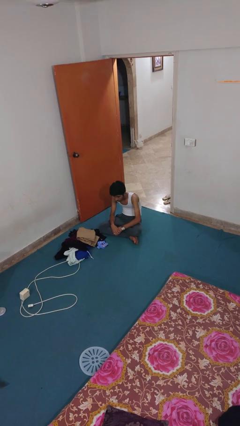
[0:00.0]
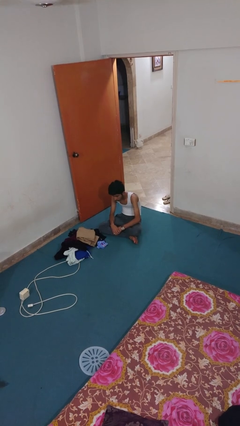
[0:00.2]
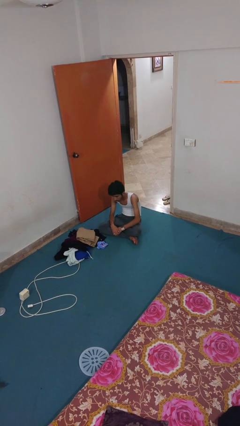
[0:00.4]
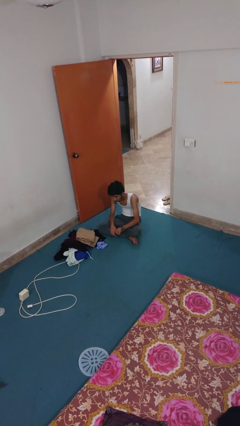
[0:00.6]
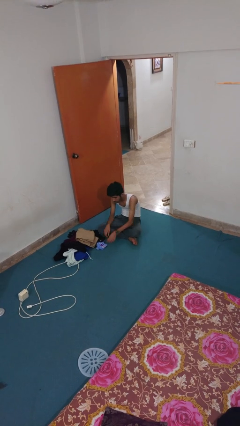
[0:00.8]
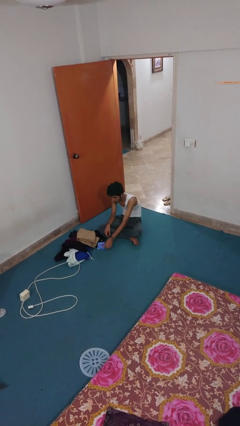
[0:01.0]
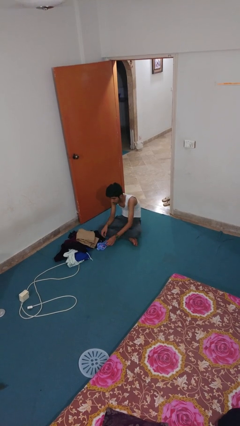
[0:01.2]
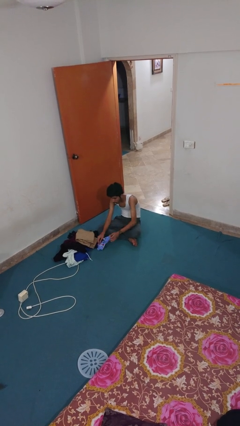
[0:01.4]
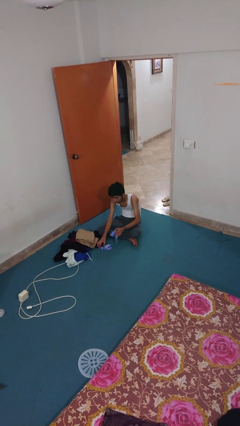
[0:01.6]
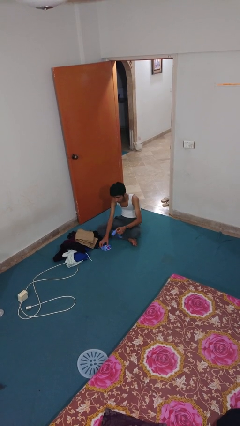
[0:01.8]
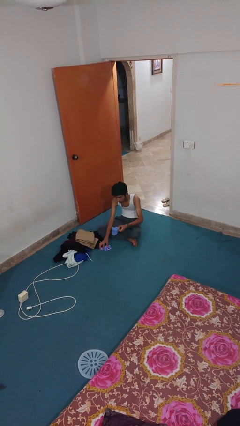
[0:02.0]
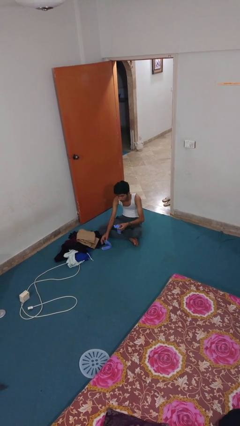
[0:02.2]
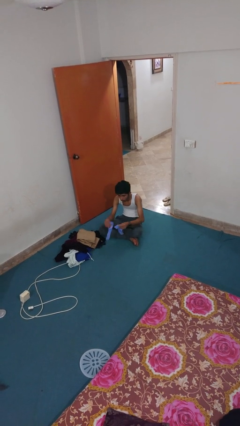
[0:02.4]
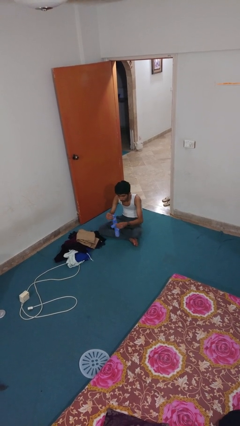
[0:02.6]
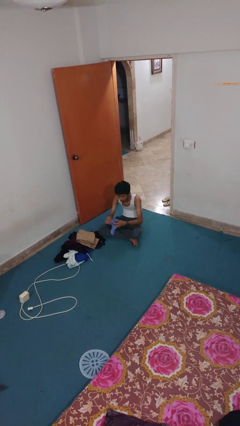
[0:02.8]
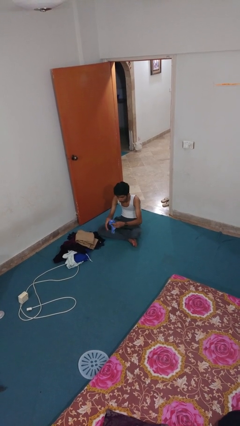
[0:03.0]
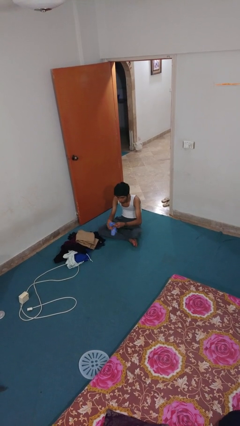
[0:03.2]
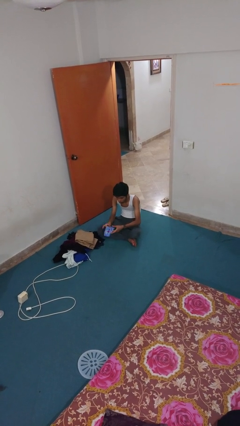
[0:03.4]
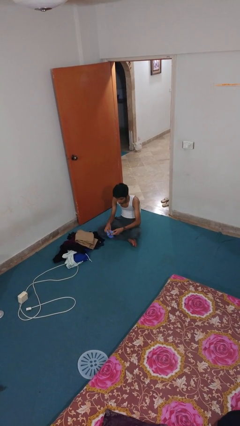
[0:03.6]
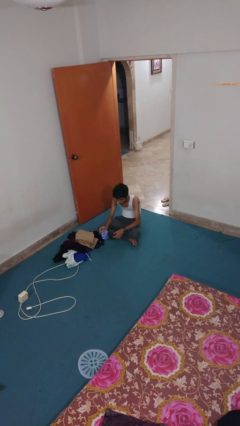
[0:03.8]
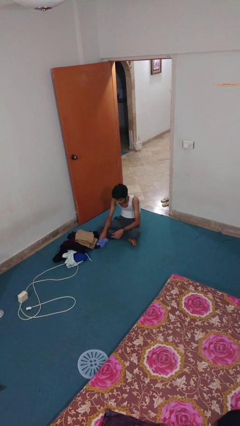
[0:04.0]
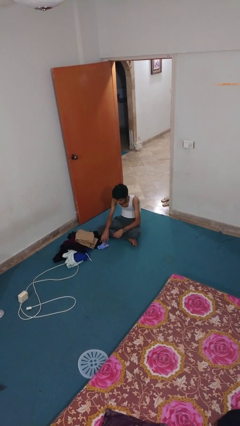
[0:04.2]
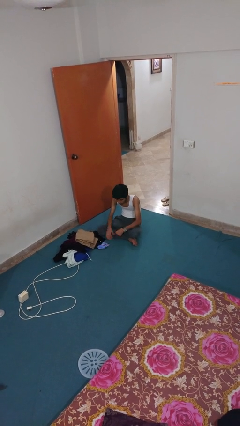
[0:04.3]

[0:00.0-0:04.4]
person folds socks

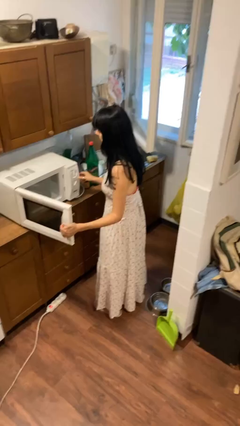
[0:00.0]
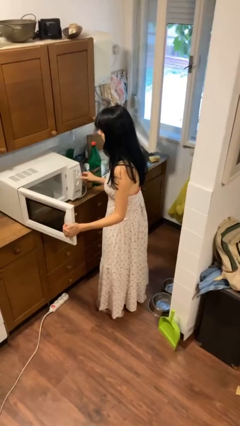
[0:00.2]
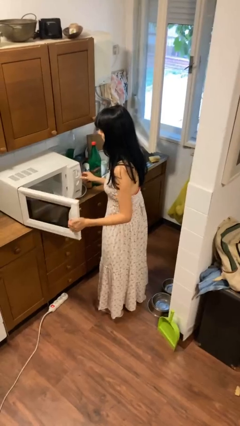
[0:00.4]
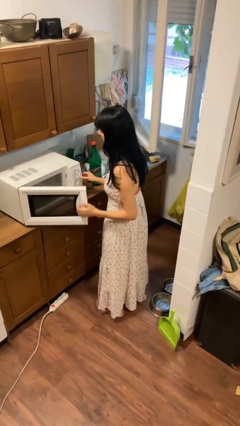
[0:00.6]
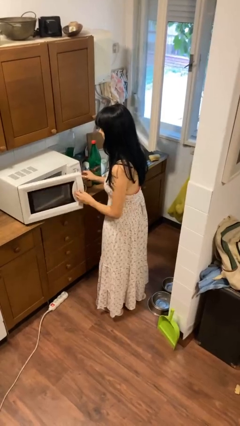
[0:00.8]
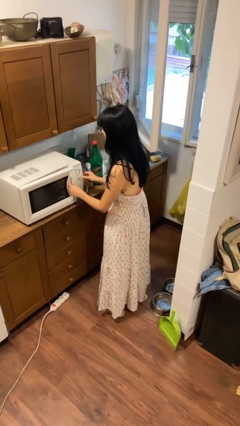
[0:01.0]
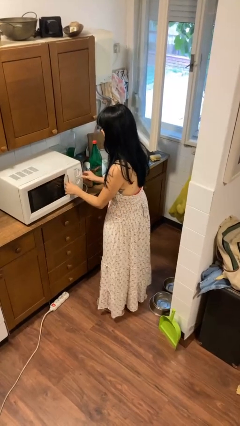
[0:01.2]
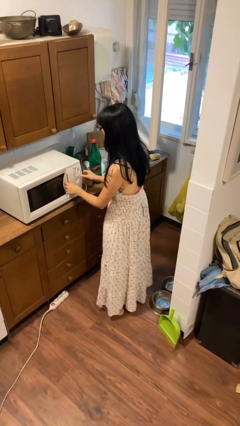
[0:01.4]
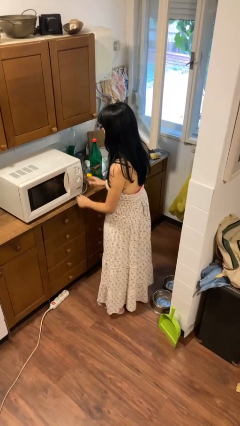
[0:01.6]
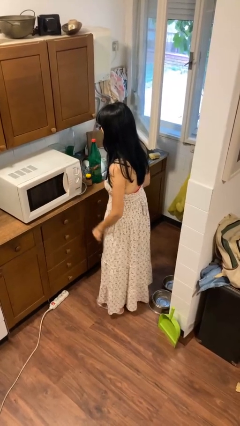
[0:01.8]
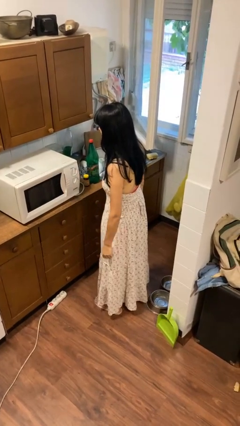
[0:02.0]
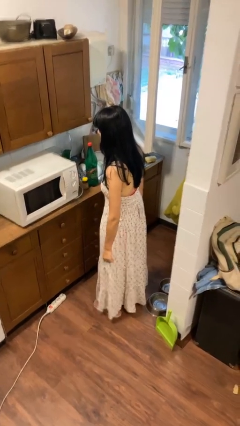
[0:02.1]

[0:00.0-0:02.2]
person closes microwave

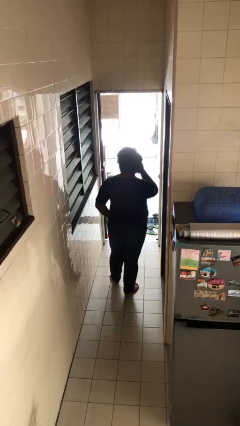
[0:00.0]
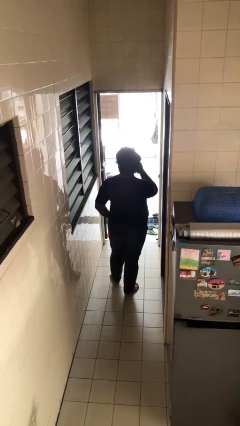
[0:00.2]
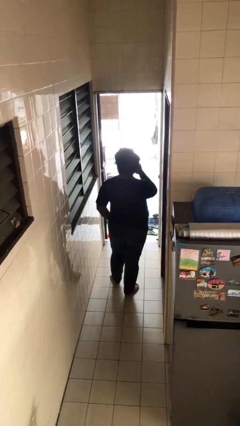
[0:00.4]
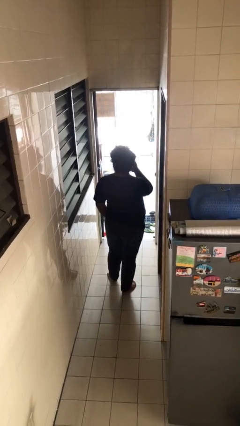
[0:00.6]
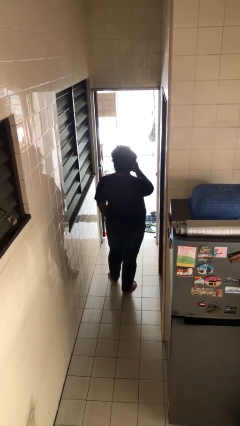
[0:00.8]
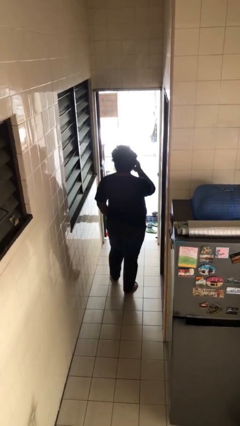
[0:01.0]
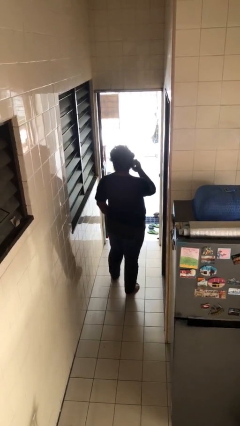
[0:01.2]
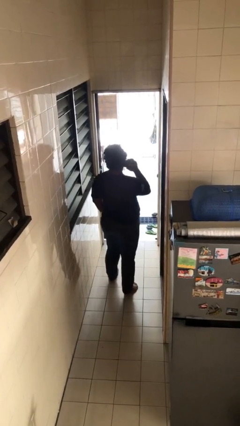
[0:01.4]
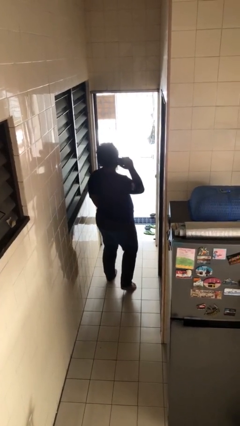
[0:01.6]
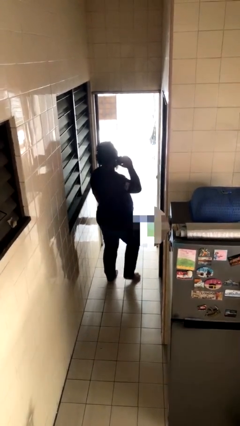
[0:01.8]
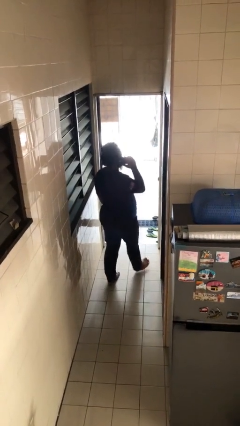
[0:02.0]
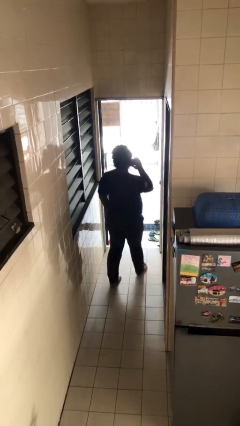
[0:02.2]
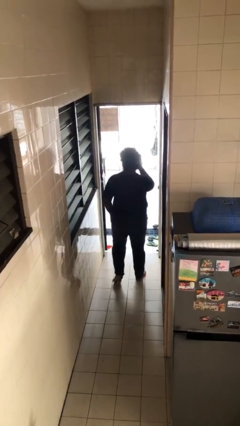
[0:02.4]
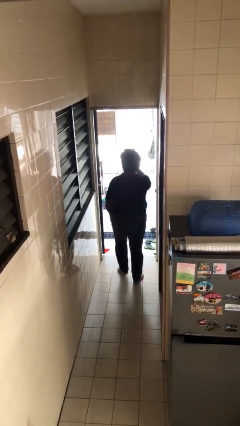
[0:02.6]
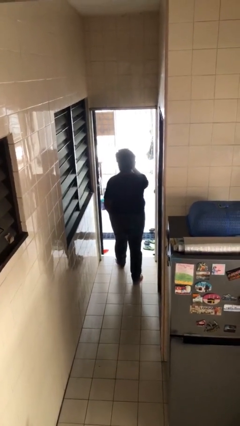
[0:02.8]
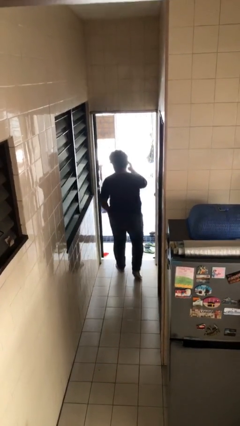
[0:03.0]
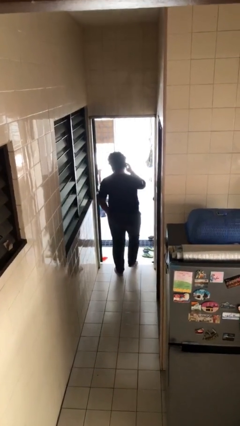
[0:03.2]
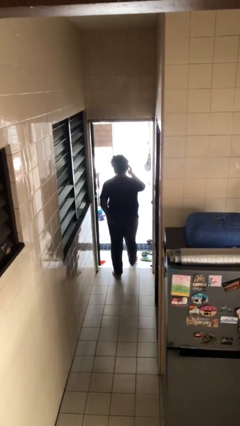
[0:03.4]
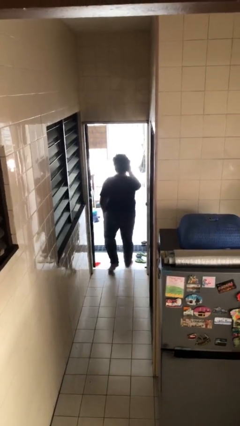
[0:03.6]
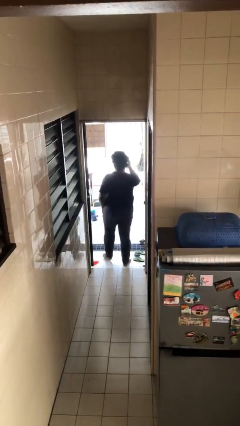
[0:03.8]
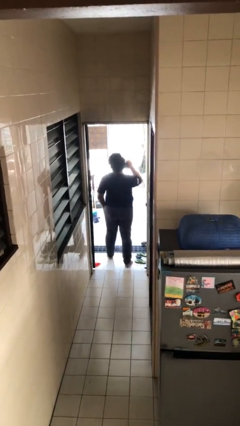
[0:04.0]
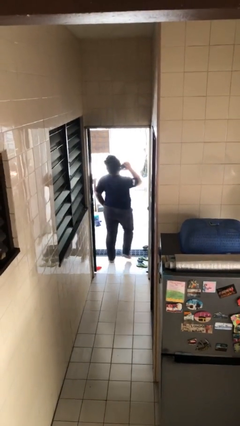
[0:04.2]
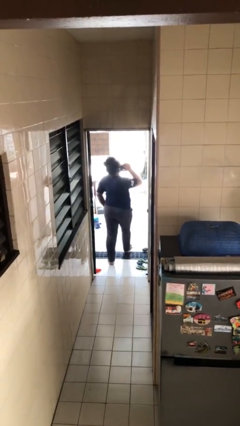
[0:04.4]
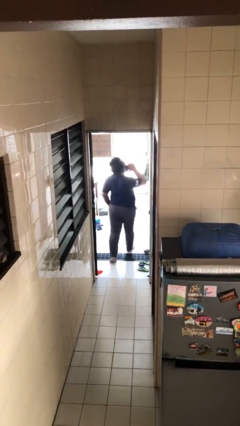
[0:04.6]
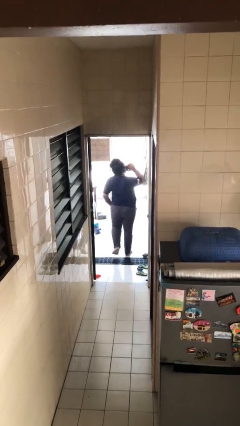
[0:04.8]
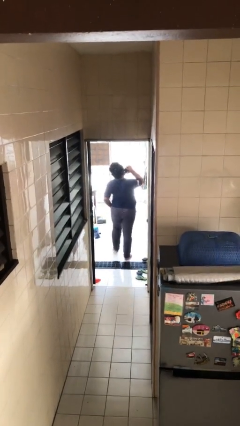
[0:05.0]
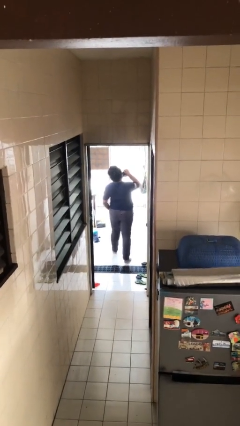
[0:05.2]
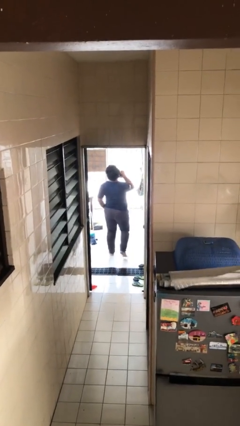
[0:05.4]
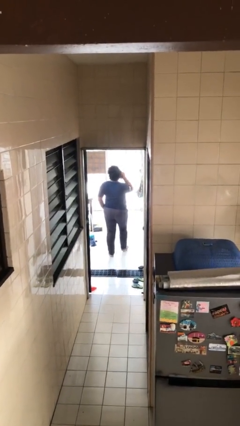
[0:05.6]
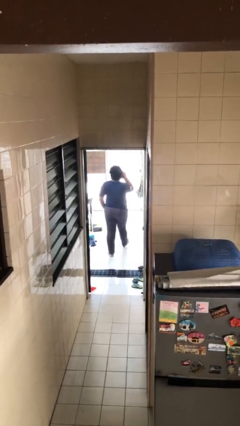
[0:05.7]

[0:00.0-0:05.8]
person exits scene through structure

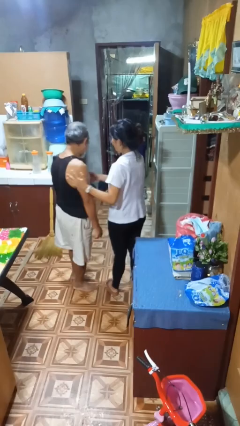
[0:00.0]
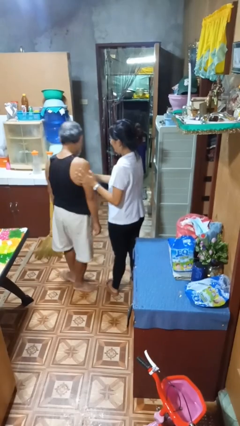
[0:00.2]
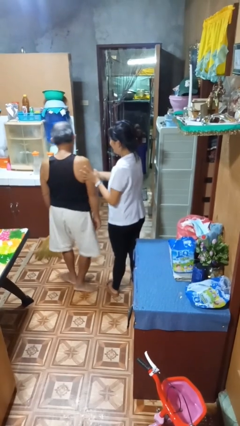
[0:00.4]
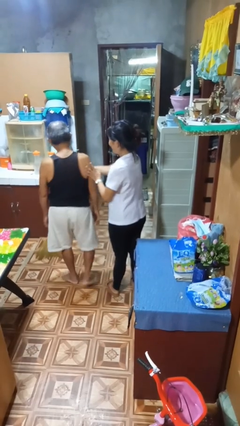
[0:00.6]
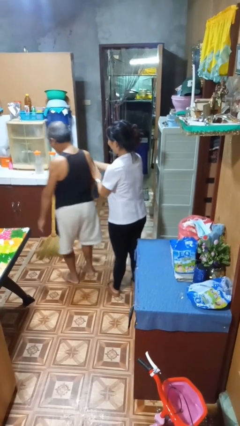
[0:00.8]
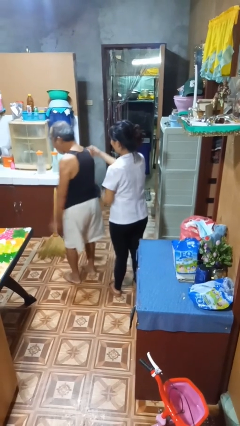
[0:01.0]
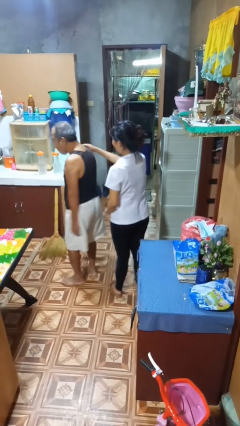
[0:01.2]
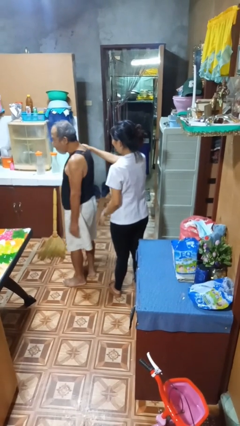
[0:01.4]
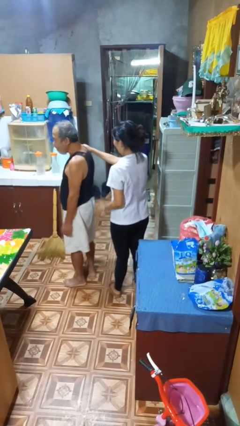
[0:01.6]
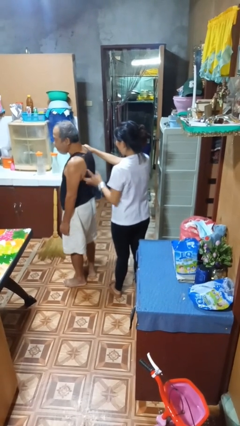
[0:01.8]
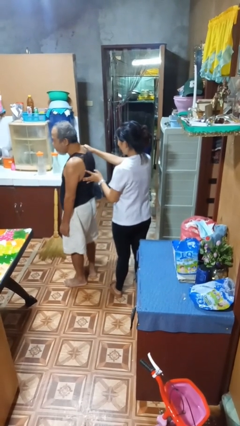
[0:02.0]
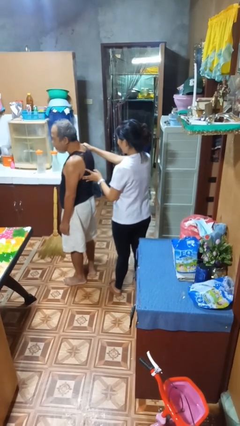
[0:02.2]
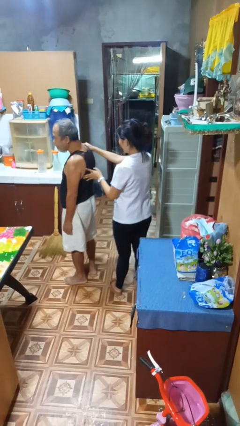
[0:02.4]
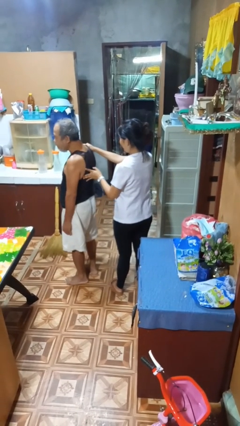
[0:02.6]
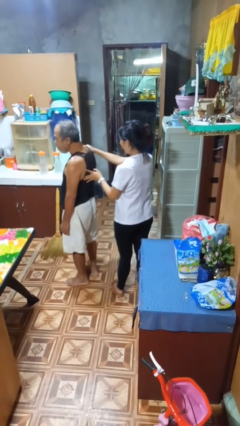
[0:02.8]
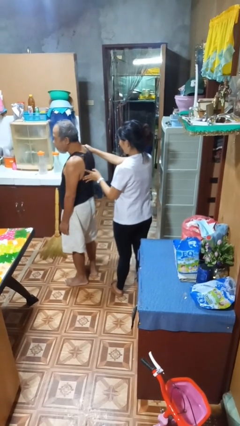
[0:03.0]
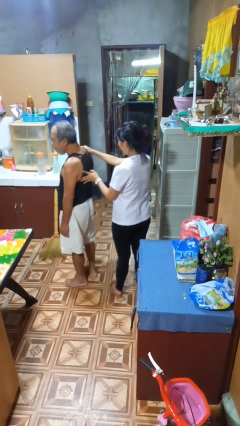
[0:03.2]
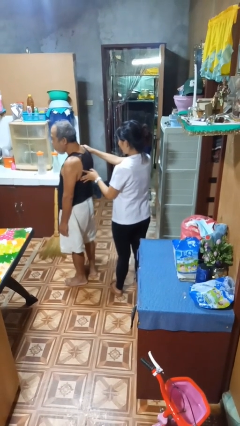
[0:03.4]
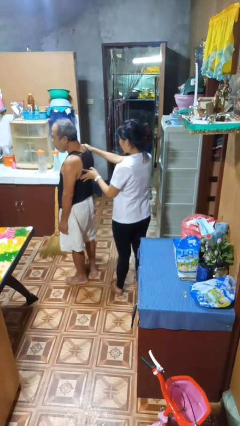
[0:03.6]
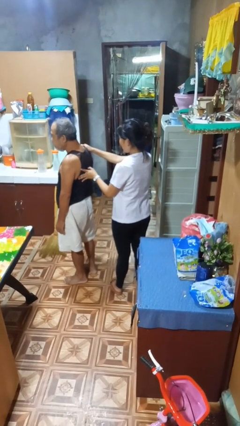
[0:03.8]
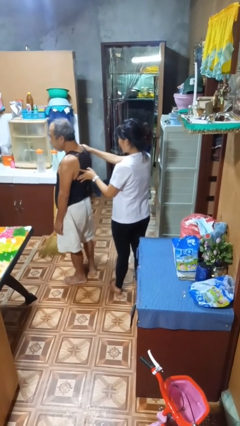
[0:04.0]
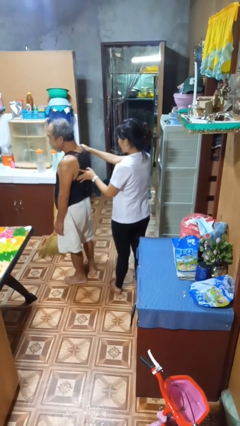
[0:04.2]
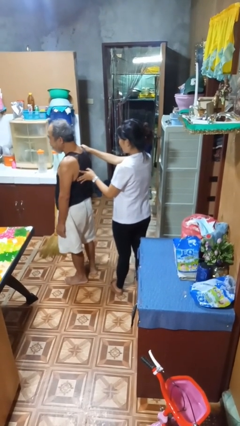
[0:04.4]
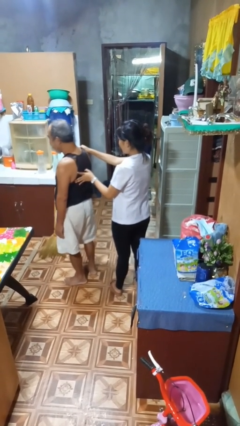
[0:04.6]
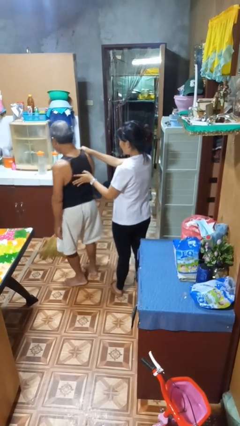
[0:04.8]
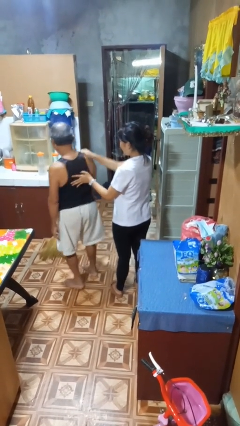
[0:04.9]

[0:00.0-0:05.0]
person grabs person by shoulder
